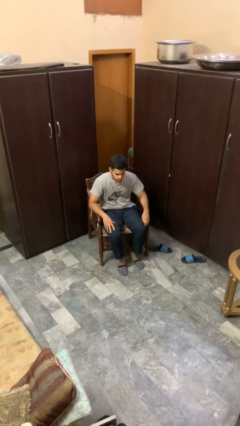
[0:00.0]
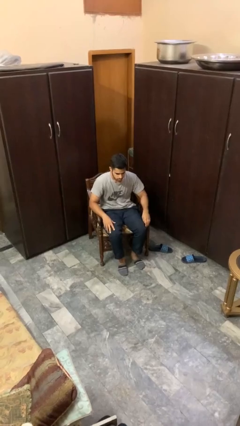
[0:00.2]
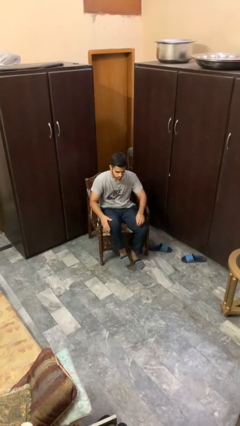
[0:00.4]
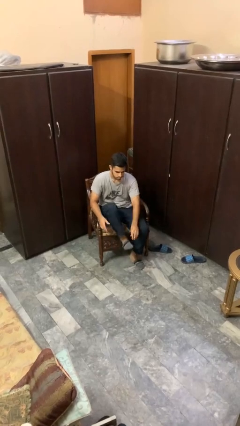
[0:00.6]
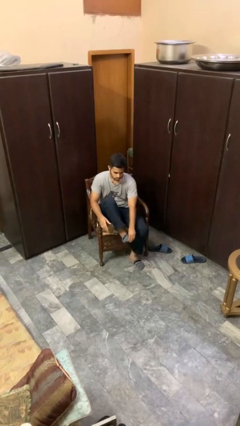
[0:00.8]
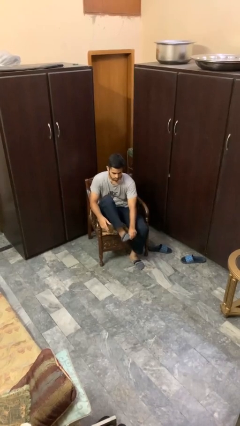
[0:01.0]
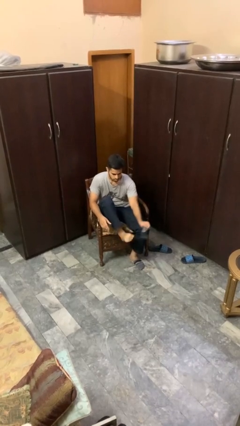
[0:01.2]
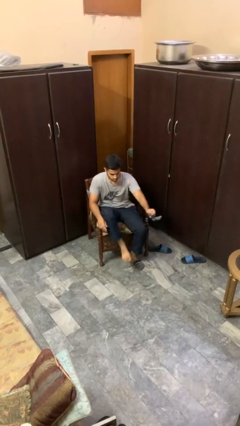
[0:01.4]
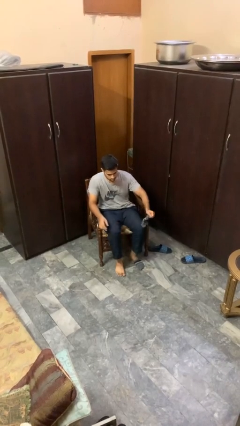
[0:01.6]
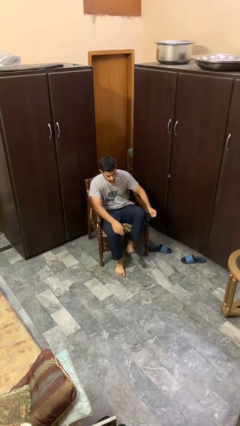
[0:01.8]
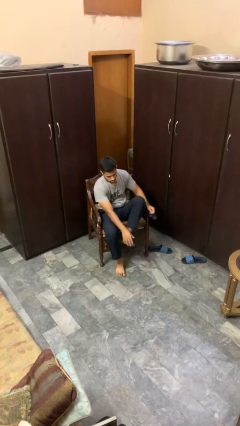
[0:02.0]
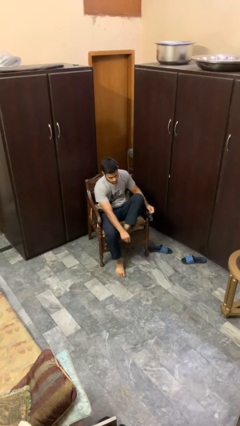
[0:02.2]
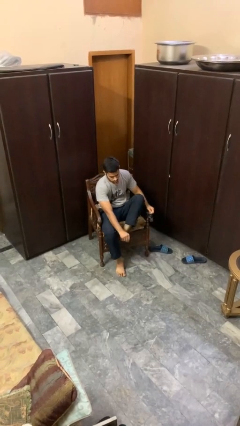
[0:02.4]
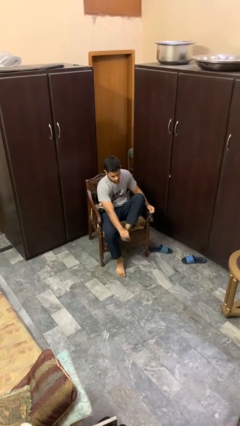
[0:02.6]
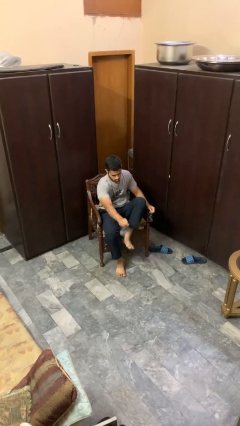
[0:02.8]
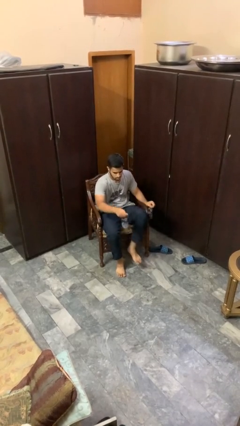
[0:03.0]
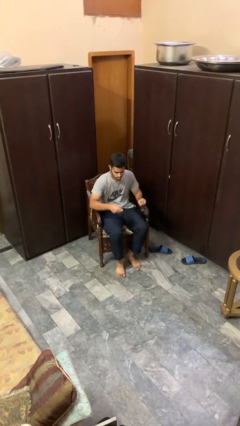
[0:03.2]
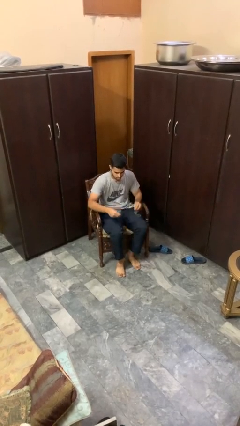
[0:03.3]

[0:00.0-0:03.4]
person takes off socks

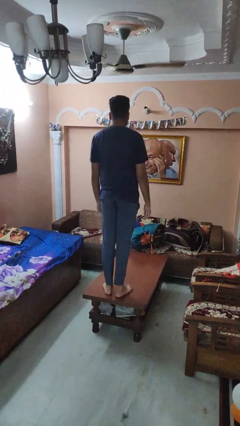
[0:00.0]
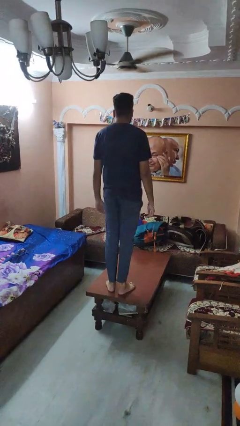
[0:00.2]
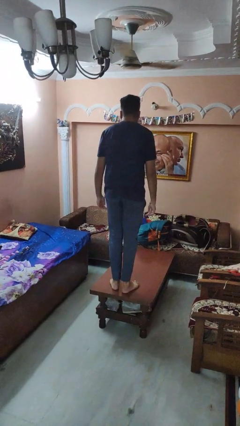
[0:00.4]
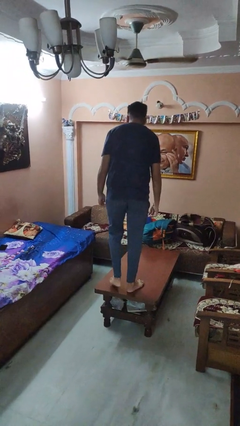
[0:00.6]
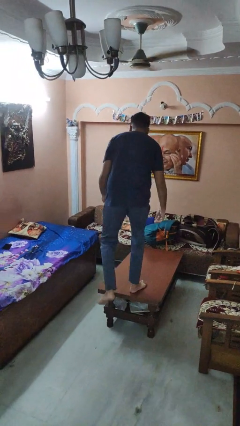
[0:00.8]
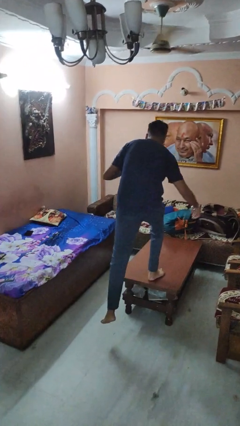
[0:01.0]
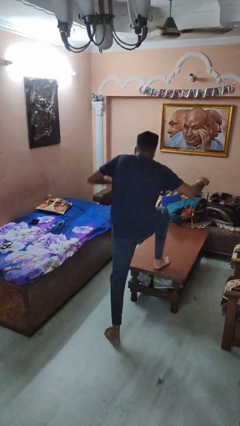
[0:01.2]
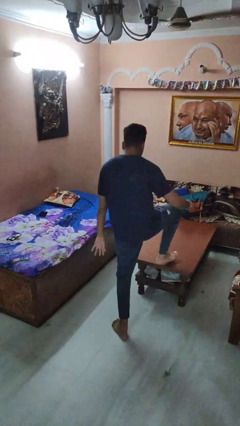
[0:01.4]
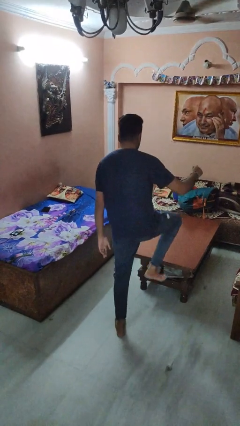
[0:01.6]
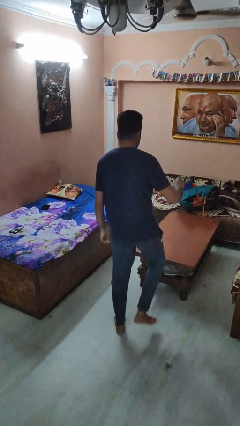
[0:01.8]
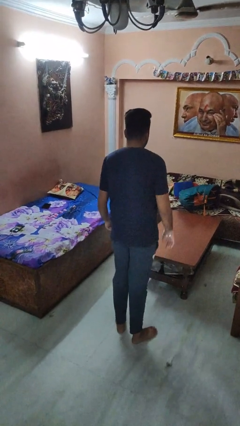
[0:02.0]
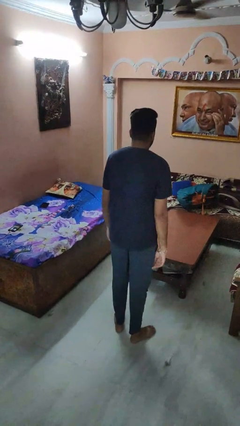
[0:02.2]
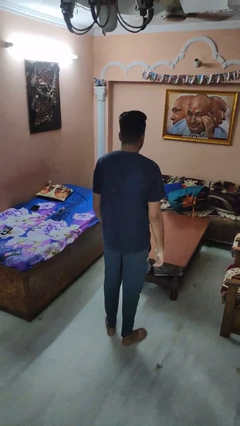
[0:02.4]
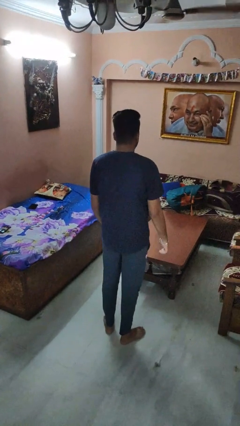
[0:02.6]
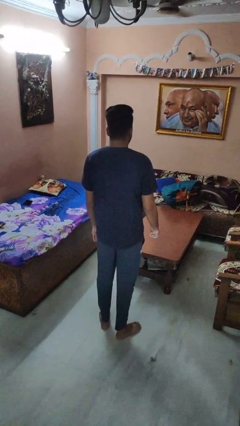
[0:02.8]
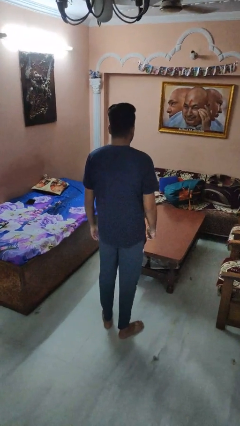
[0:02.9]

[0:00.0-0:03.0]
person climbs off table

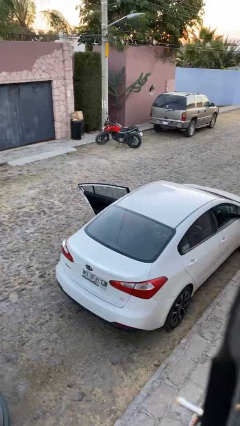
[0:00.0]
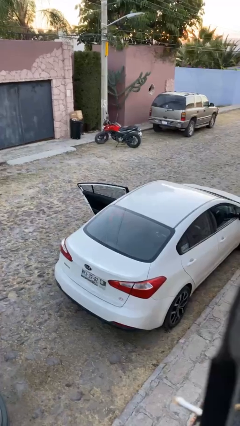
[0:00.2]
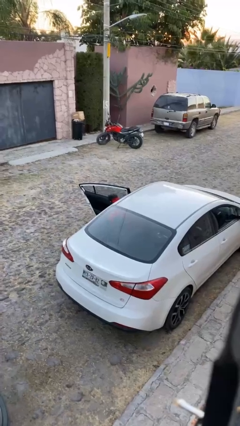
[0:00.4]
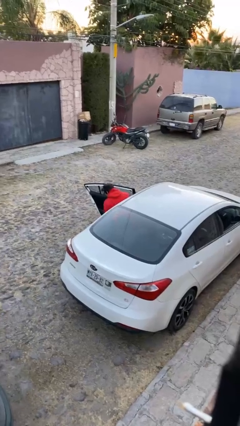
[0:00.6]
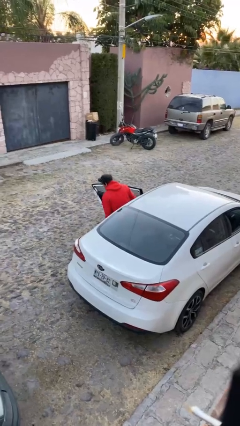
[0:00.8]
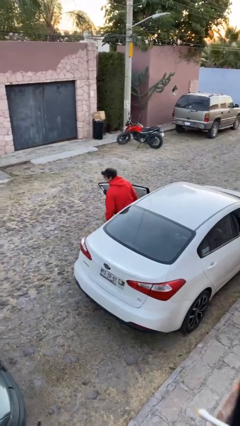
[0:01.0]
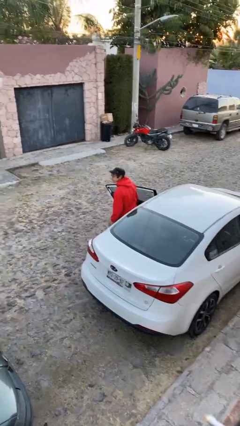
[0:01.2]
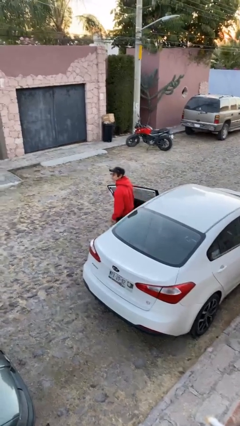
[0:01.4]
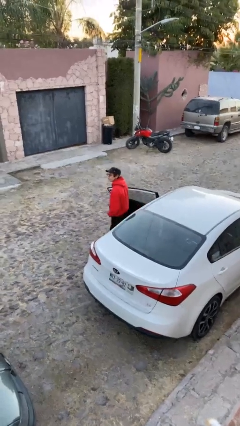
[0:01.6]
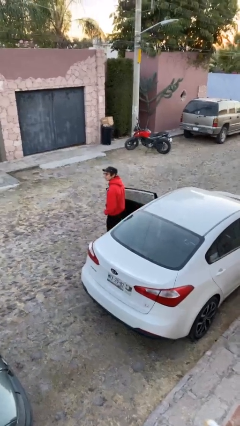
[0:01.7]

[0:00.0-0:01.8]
person exits car

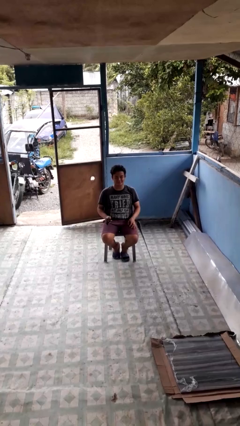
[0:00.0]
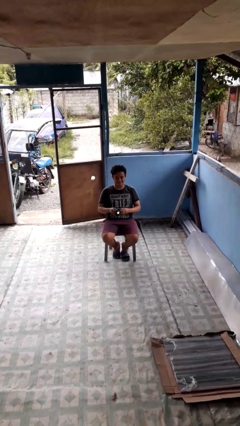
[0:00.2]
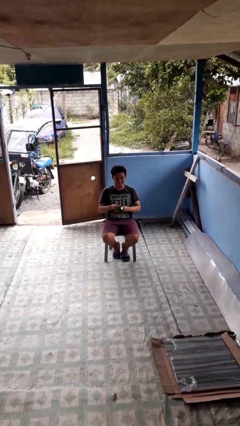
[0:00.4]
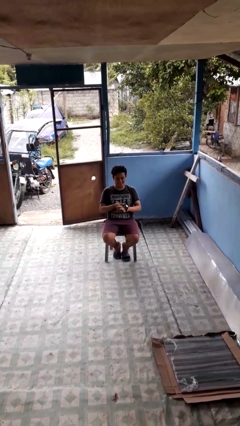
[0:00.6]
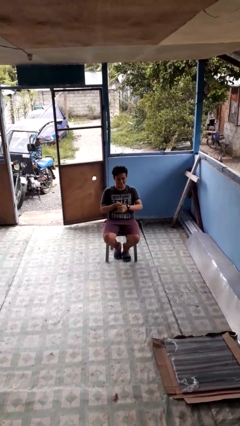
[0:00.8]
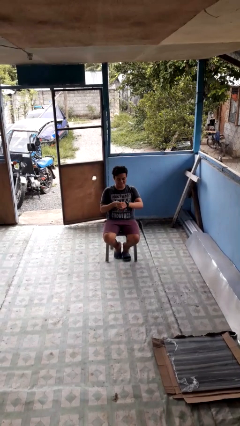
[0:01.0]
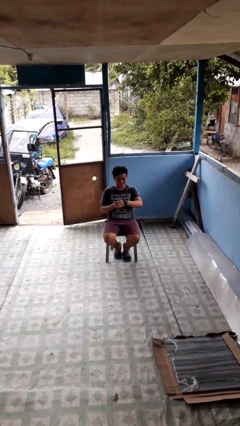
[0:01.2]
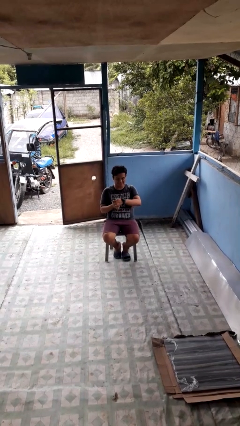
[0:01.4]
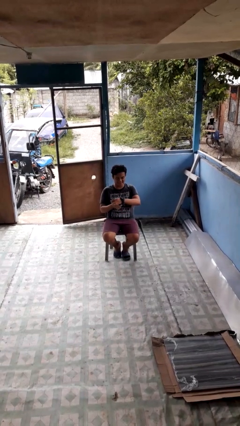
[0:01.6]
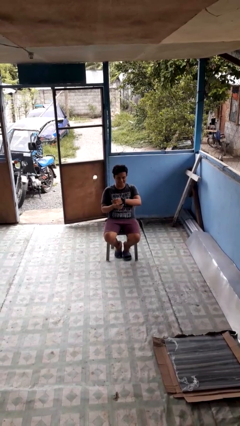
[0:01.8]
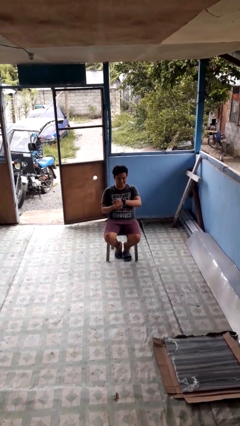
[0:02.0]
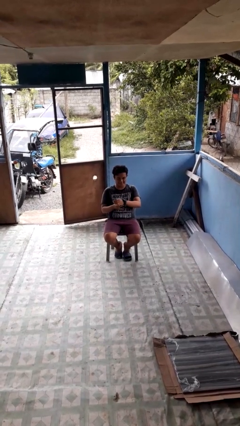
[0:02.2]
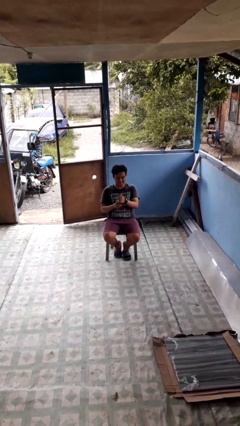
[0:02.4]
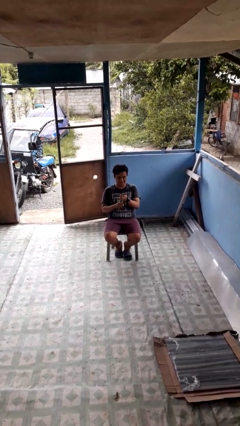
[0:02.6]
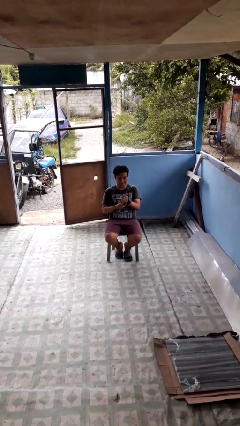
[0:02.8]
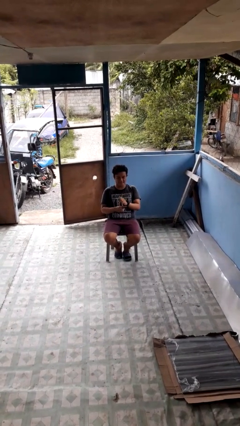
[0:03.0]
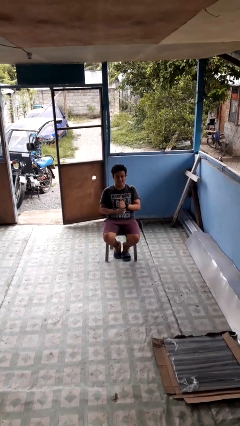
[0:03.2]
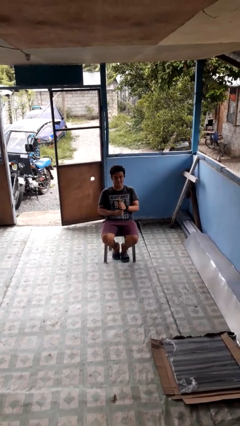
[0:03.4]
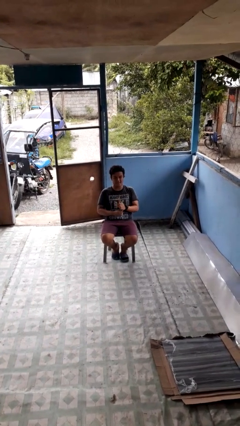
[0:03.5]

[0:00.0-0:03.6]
person puts on wristwatch

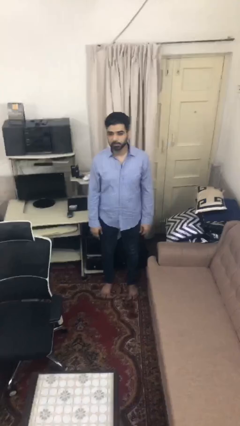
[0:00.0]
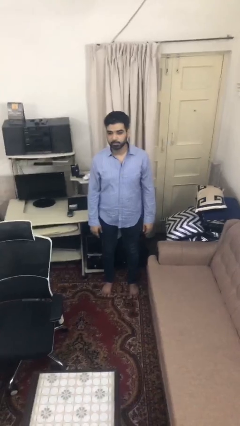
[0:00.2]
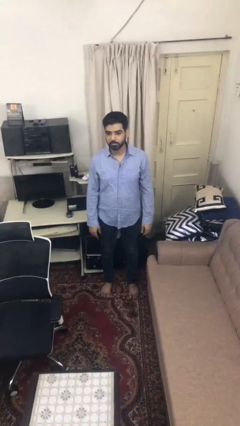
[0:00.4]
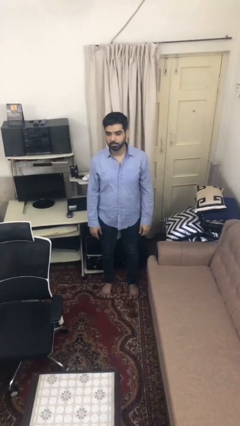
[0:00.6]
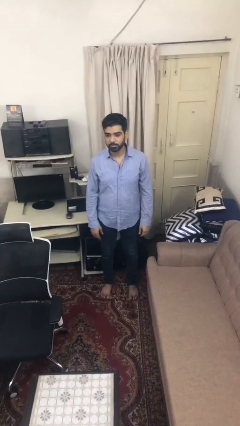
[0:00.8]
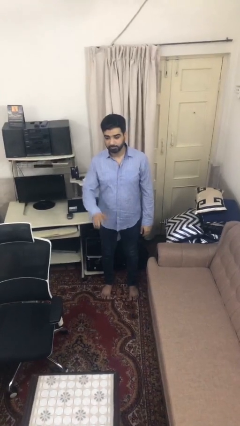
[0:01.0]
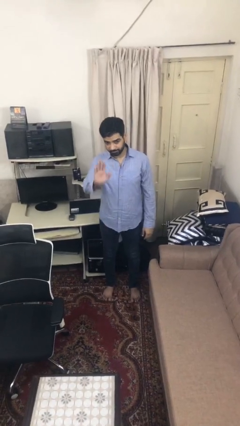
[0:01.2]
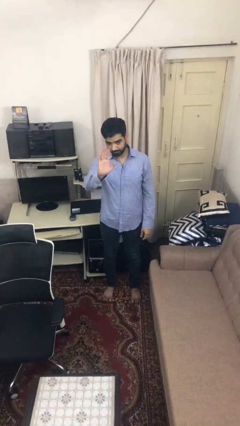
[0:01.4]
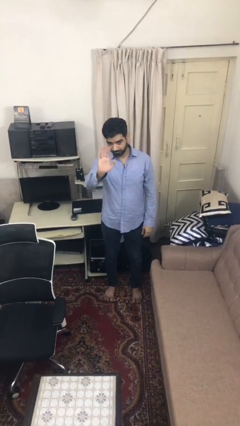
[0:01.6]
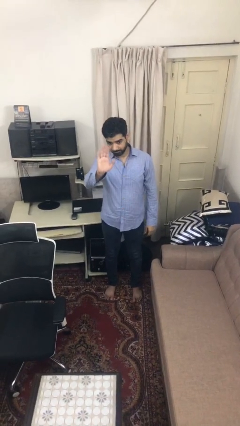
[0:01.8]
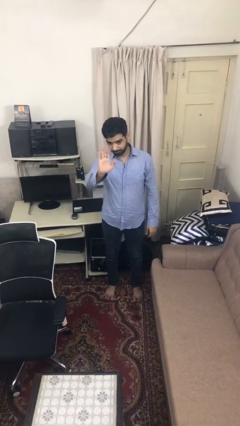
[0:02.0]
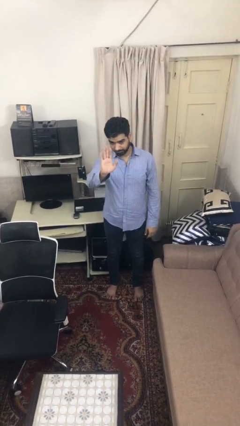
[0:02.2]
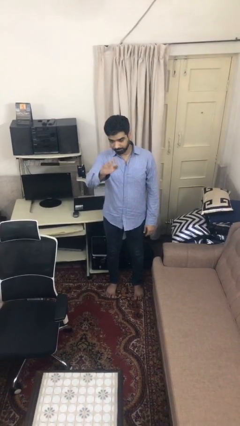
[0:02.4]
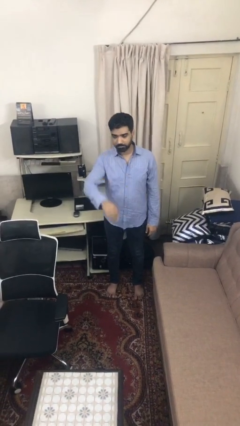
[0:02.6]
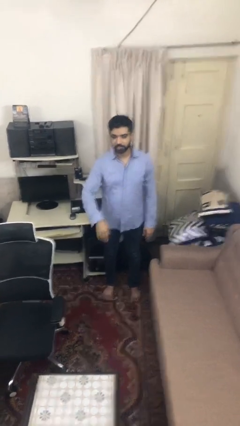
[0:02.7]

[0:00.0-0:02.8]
person waves at person

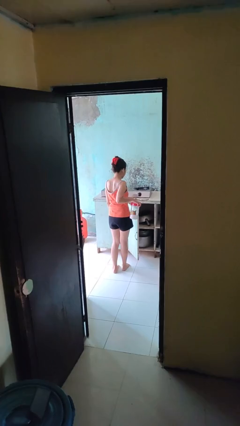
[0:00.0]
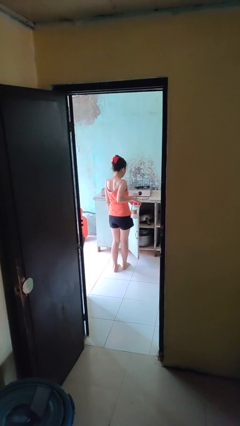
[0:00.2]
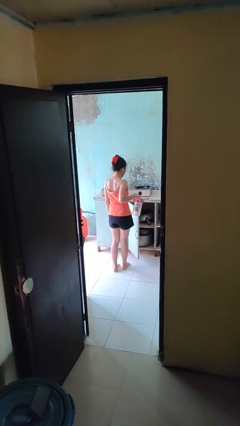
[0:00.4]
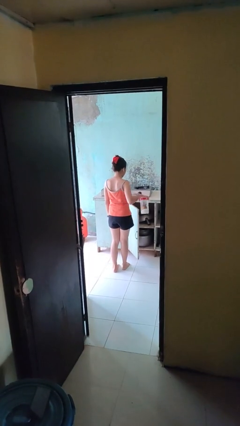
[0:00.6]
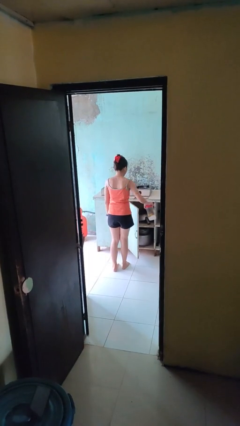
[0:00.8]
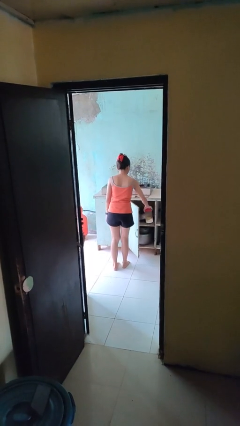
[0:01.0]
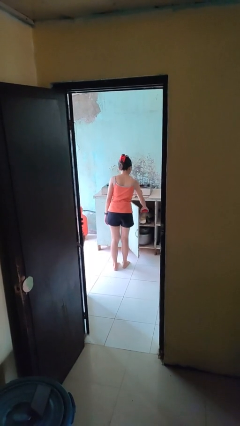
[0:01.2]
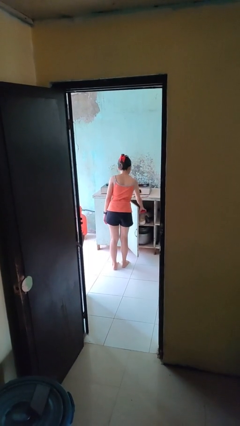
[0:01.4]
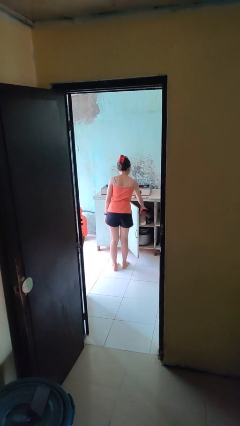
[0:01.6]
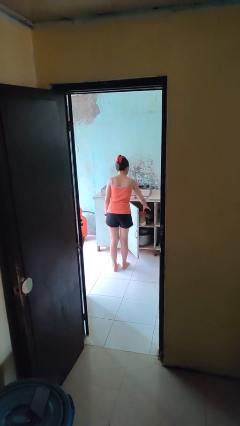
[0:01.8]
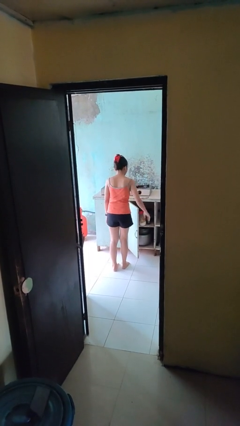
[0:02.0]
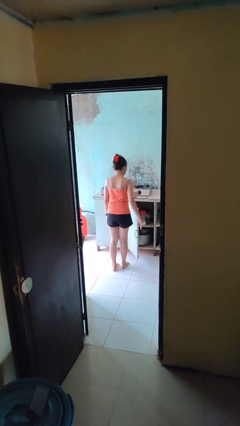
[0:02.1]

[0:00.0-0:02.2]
person puts down object into cabinet

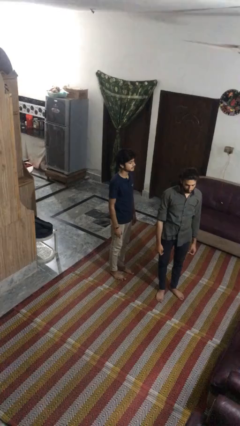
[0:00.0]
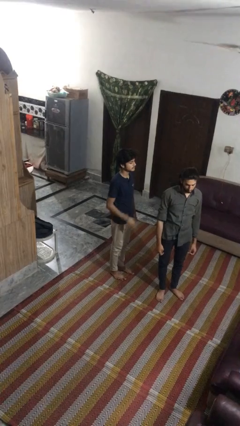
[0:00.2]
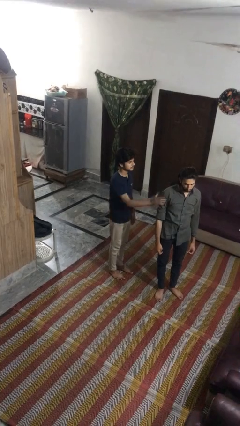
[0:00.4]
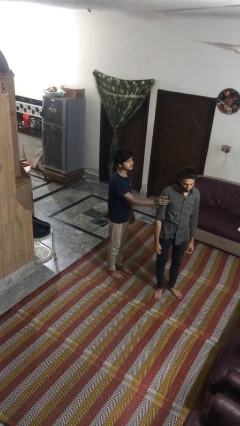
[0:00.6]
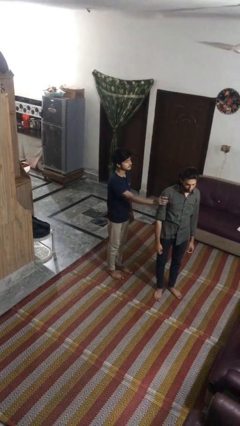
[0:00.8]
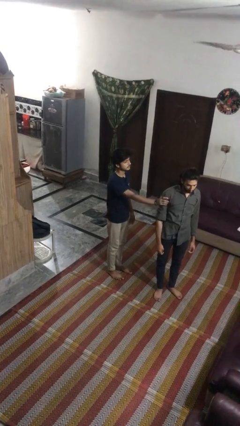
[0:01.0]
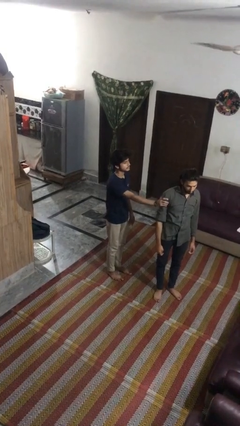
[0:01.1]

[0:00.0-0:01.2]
person grabs person by shoulder
